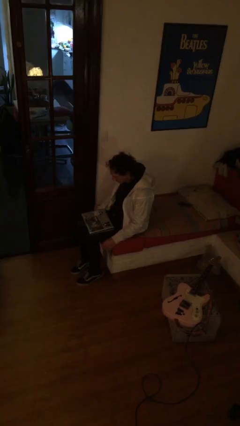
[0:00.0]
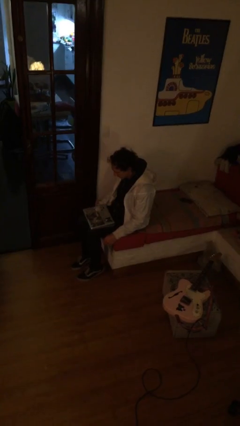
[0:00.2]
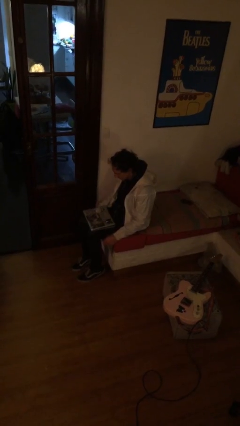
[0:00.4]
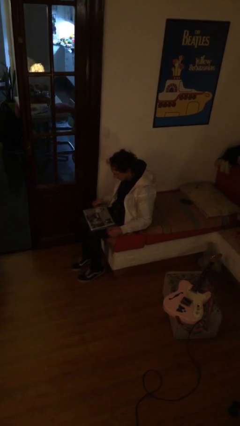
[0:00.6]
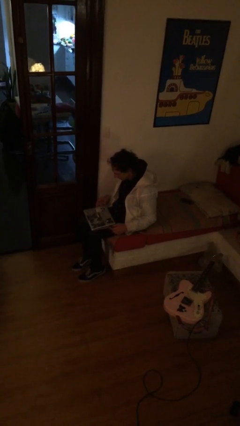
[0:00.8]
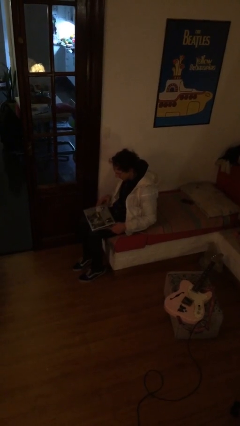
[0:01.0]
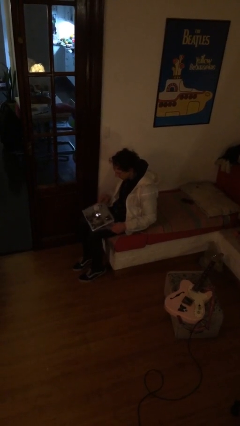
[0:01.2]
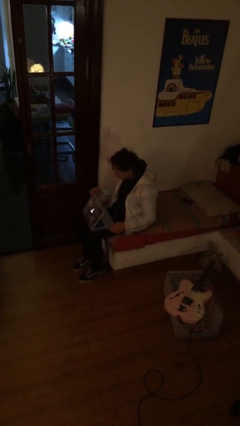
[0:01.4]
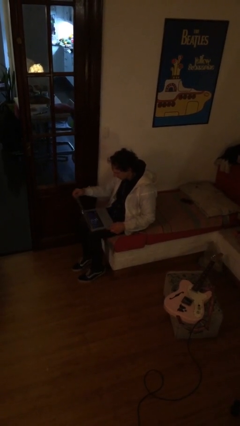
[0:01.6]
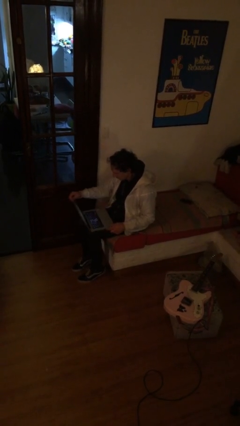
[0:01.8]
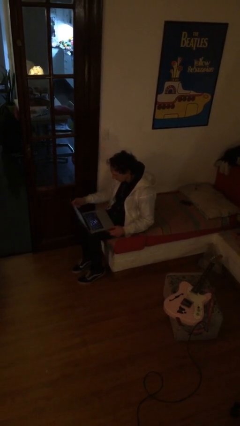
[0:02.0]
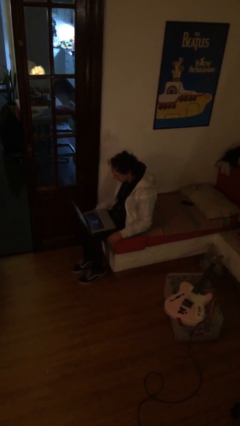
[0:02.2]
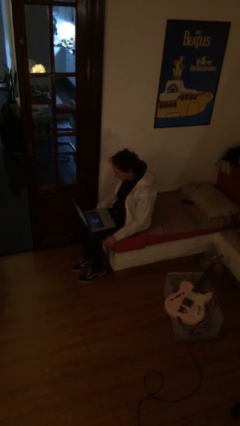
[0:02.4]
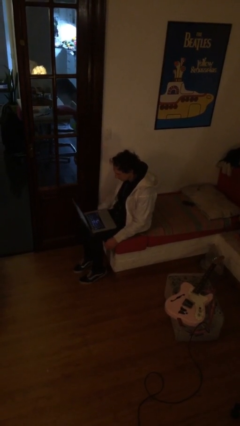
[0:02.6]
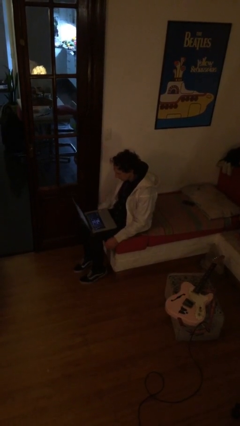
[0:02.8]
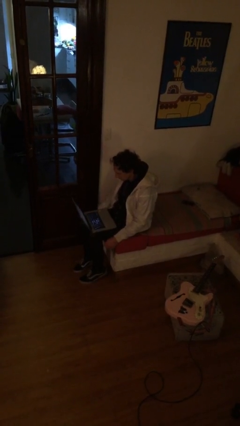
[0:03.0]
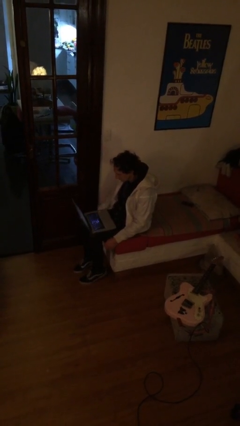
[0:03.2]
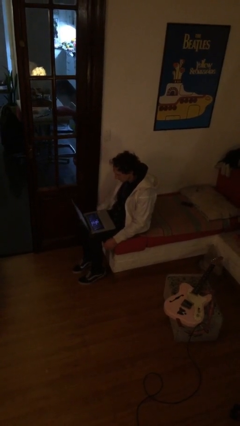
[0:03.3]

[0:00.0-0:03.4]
person opens laptop

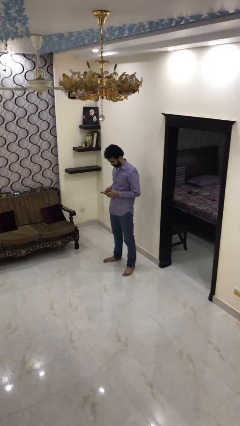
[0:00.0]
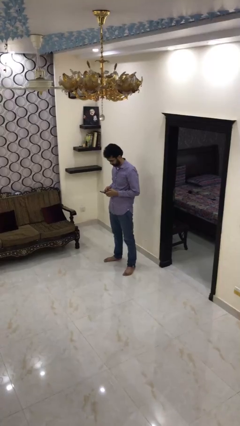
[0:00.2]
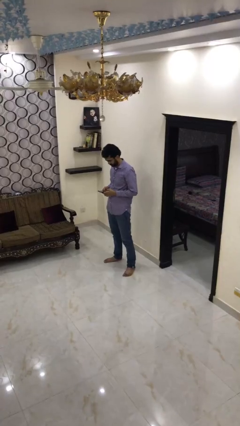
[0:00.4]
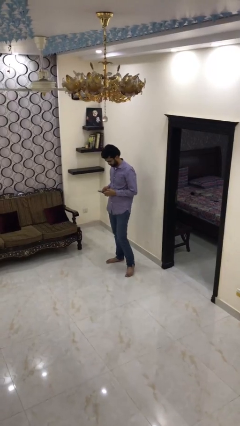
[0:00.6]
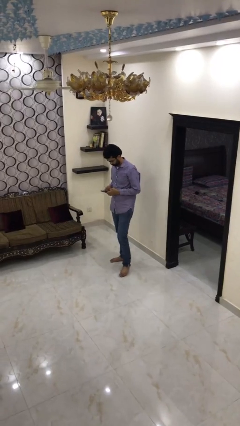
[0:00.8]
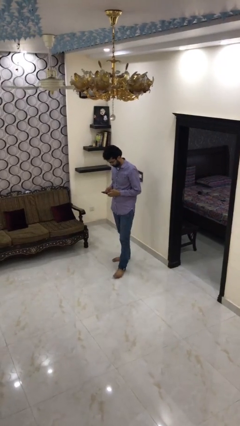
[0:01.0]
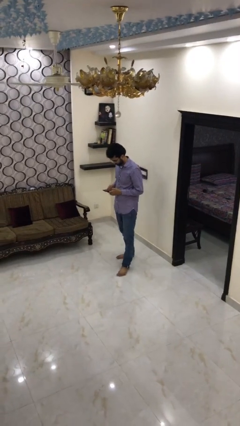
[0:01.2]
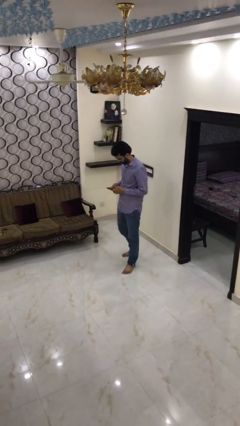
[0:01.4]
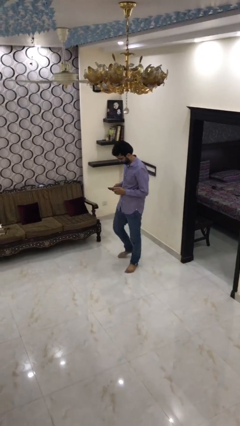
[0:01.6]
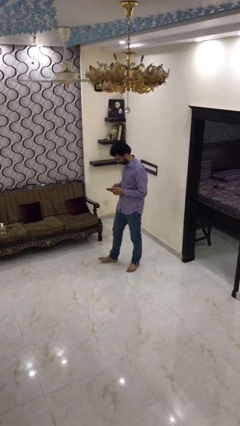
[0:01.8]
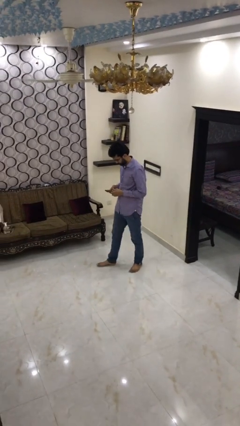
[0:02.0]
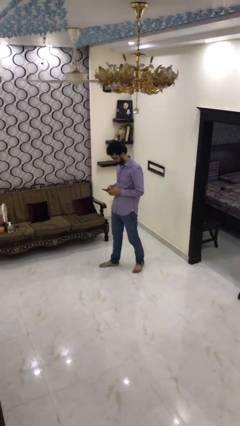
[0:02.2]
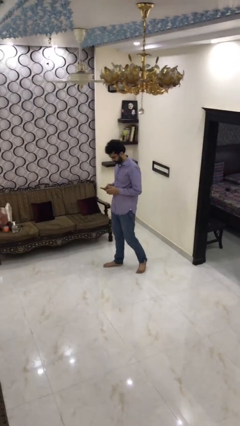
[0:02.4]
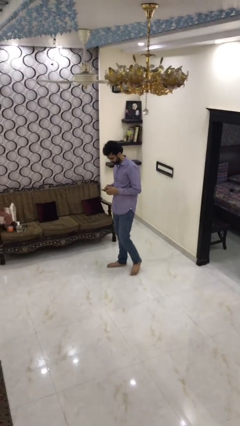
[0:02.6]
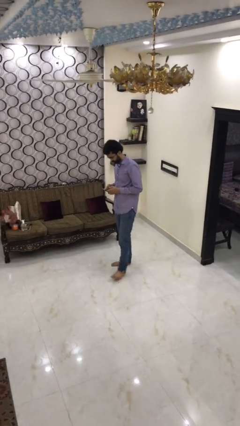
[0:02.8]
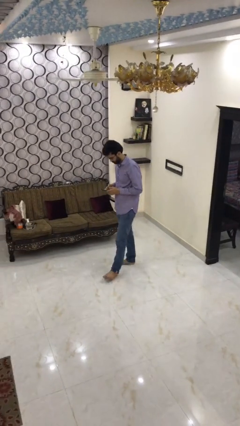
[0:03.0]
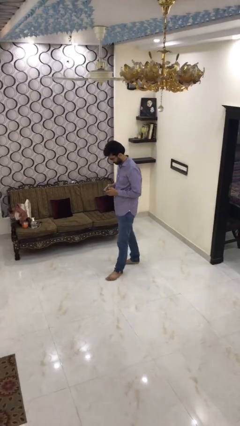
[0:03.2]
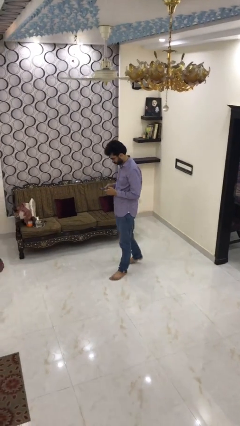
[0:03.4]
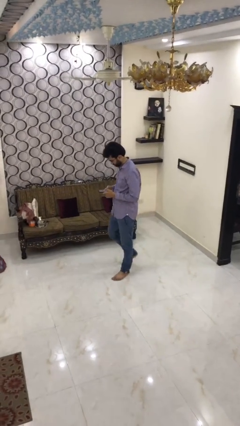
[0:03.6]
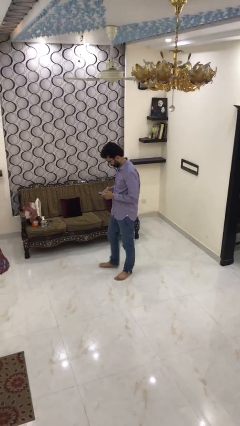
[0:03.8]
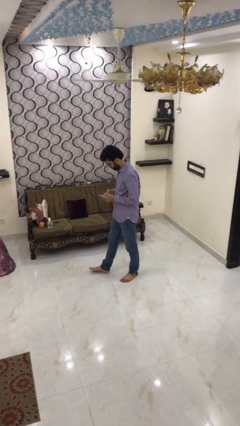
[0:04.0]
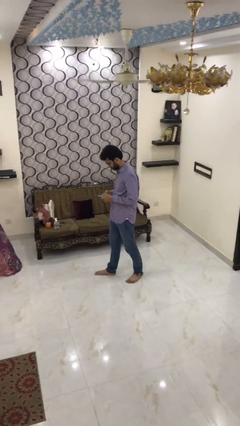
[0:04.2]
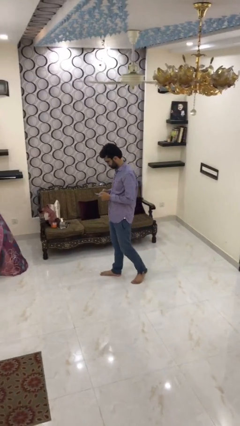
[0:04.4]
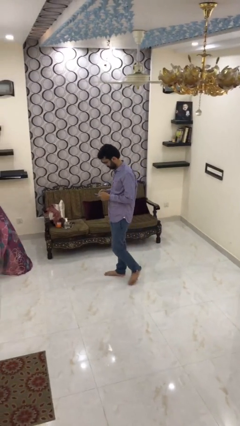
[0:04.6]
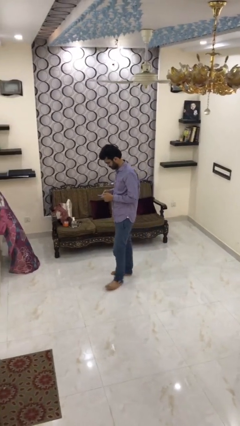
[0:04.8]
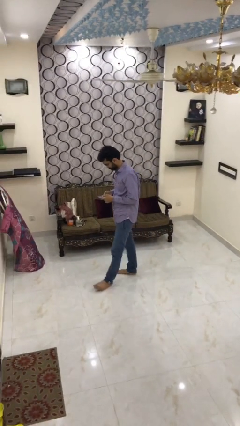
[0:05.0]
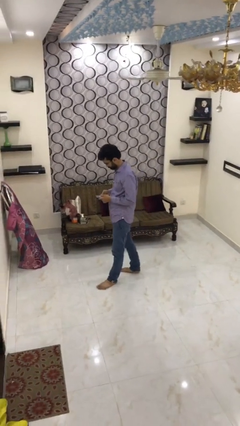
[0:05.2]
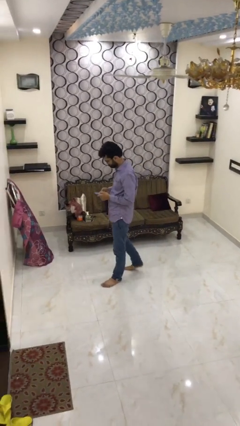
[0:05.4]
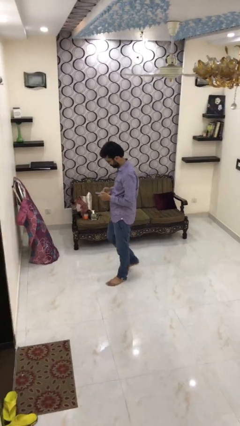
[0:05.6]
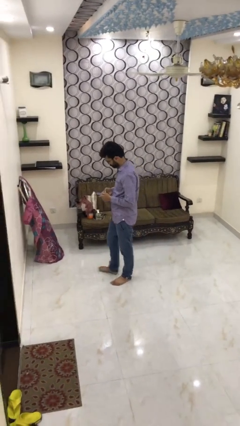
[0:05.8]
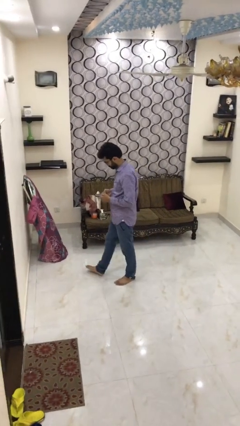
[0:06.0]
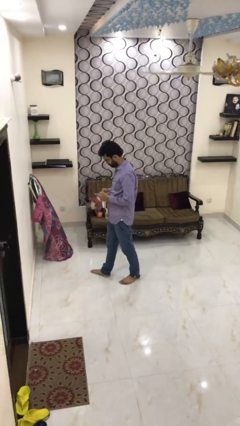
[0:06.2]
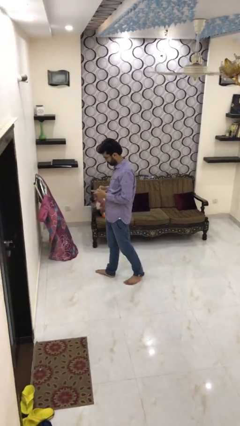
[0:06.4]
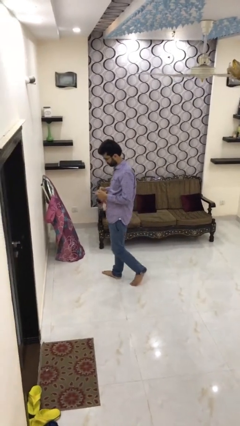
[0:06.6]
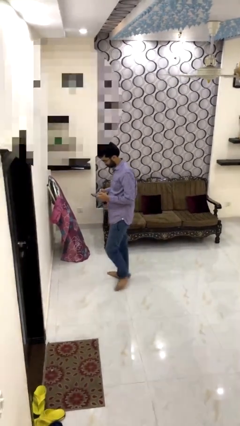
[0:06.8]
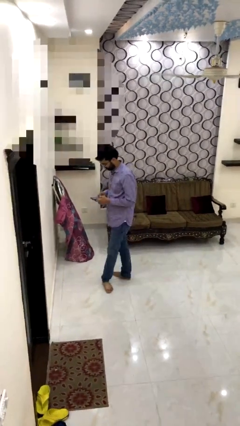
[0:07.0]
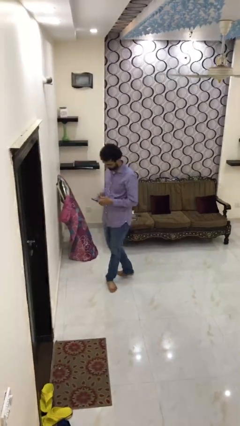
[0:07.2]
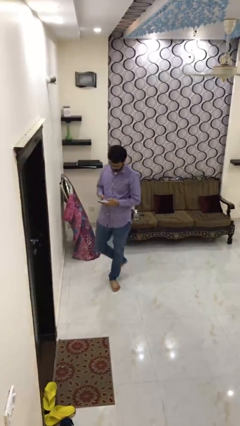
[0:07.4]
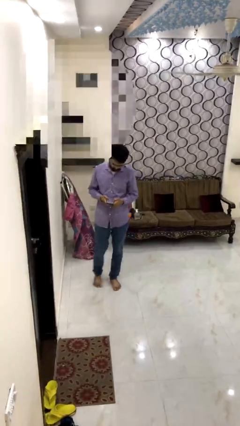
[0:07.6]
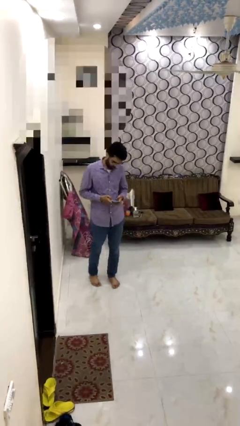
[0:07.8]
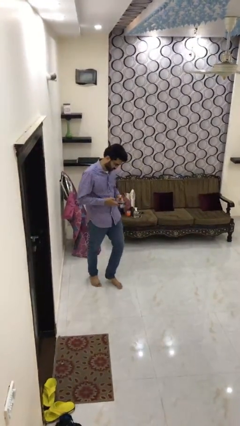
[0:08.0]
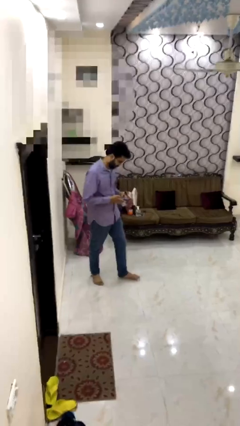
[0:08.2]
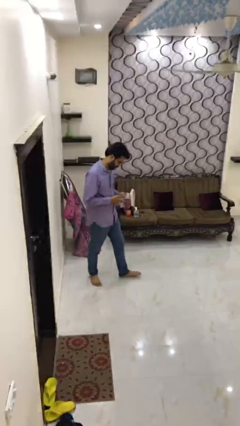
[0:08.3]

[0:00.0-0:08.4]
person texts on phone

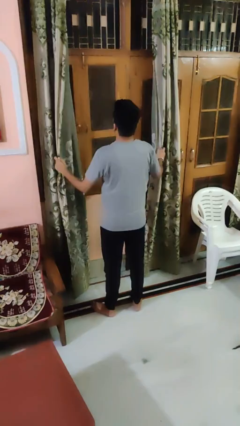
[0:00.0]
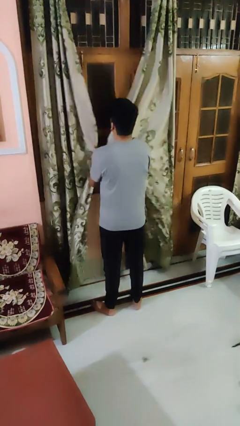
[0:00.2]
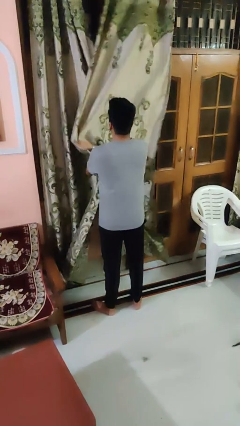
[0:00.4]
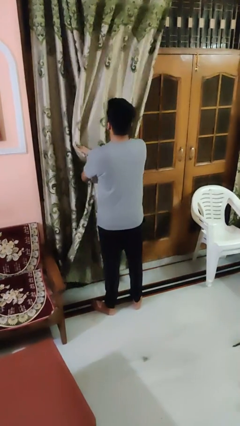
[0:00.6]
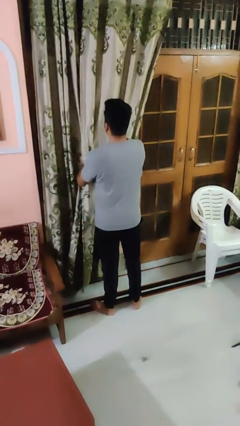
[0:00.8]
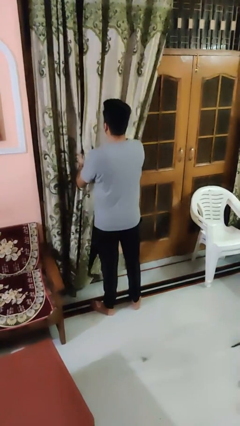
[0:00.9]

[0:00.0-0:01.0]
person closes curtains

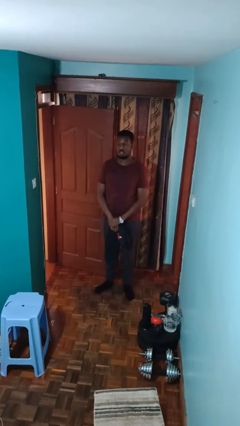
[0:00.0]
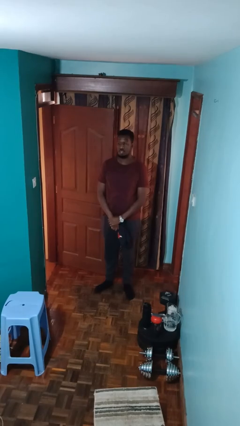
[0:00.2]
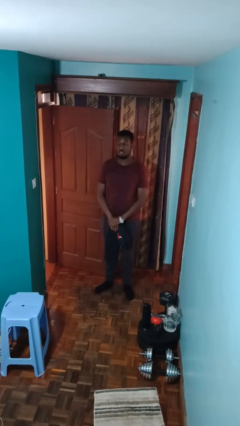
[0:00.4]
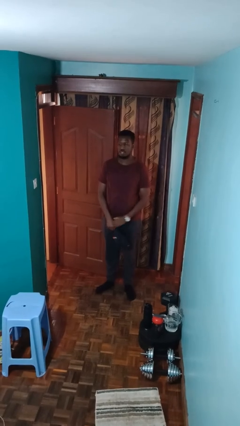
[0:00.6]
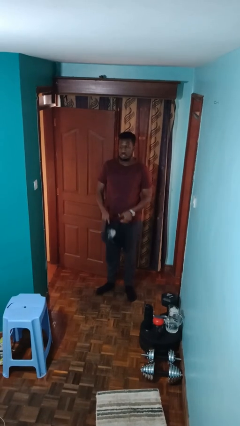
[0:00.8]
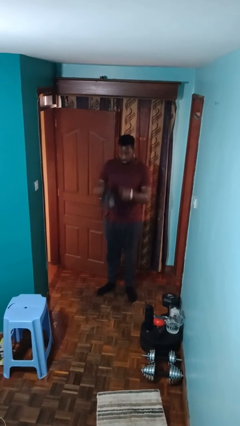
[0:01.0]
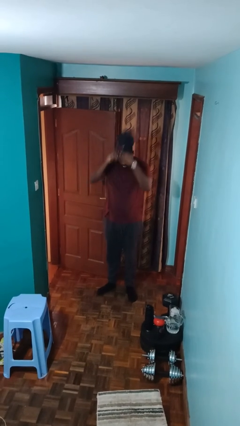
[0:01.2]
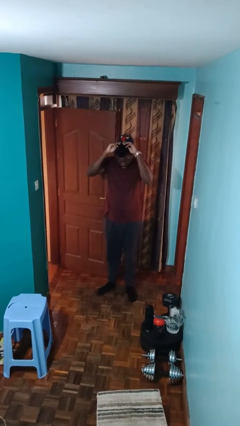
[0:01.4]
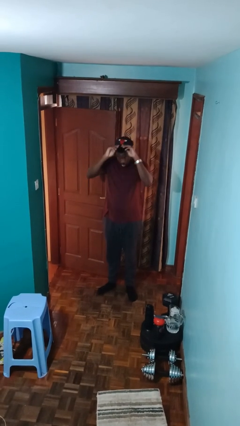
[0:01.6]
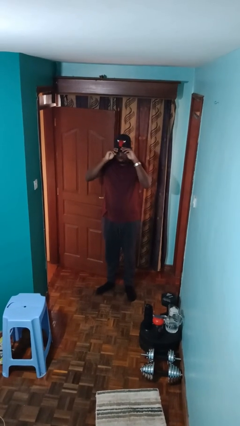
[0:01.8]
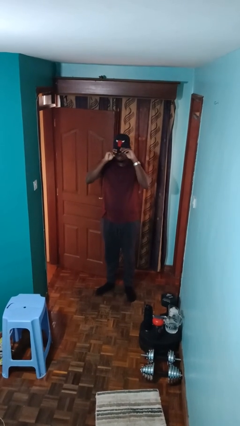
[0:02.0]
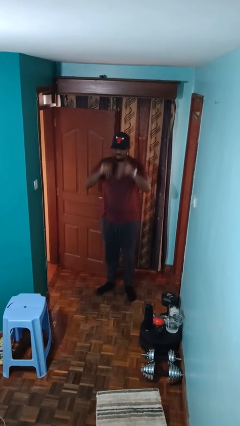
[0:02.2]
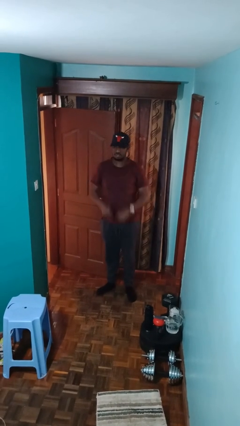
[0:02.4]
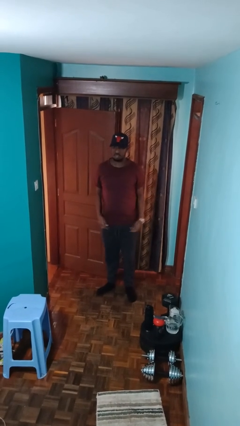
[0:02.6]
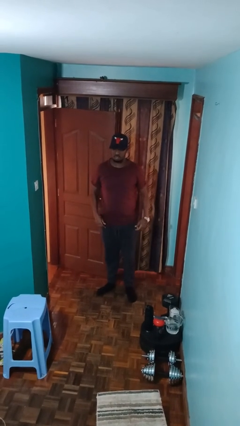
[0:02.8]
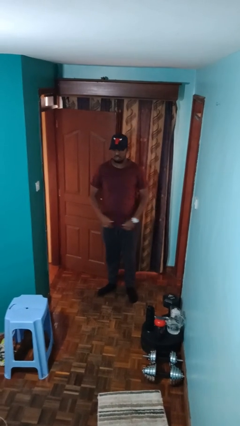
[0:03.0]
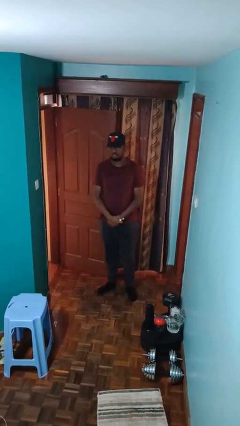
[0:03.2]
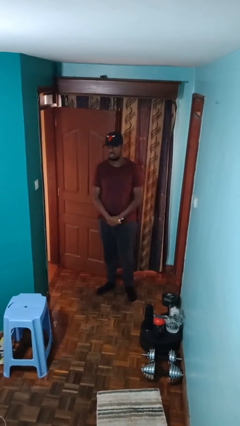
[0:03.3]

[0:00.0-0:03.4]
person puts on hat

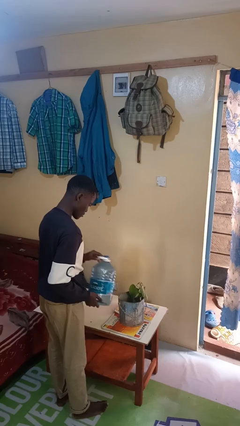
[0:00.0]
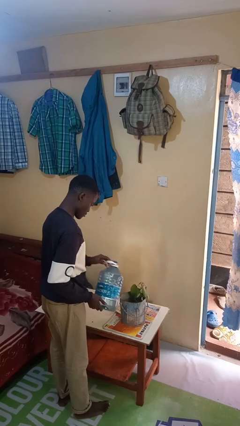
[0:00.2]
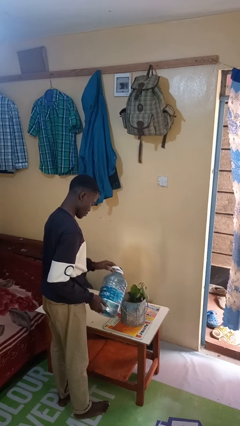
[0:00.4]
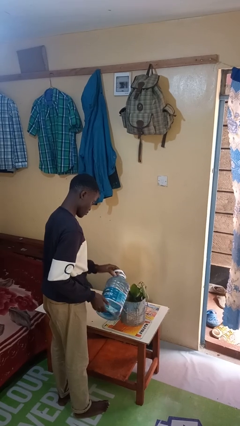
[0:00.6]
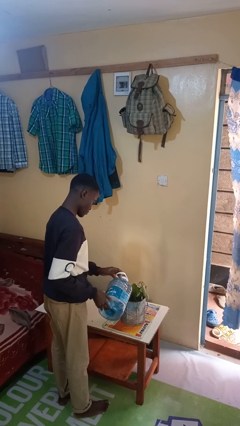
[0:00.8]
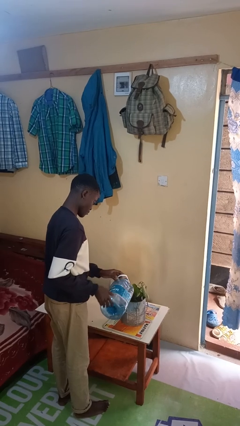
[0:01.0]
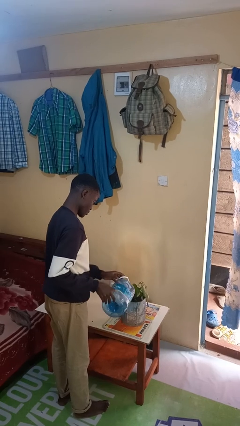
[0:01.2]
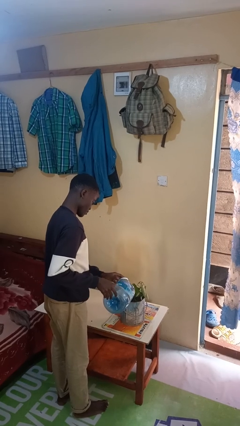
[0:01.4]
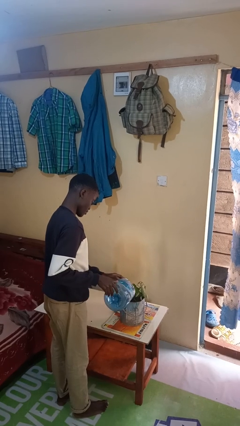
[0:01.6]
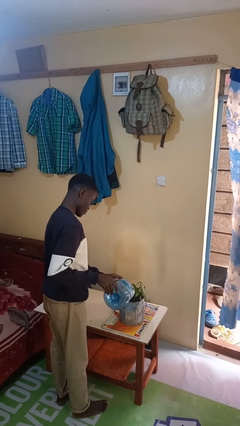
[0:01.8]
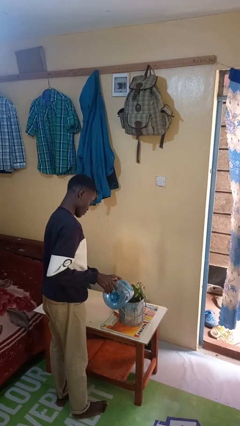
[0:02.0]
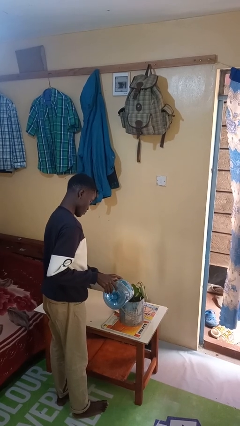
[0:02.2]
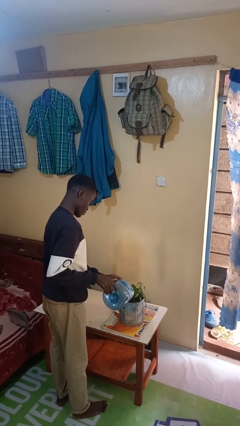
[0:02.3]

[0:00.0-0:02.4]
person waters houseplant
